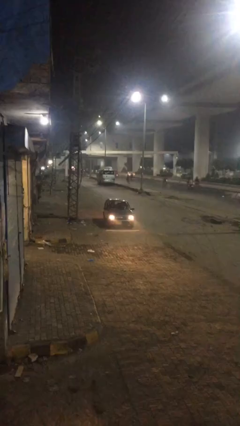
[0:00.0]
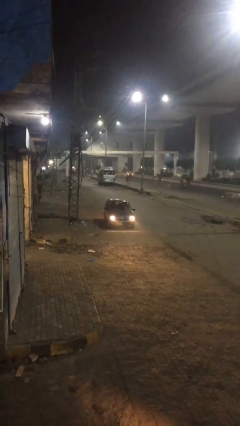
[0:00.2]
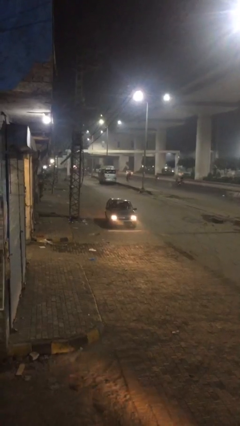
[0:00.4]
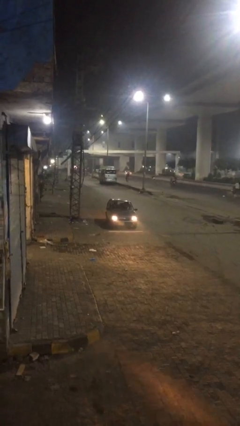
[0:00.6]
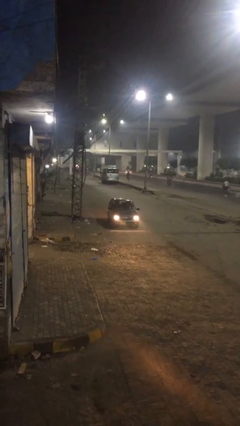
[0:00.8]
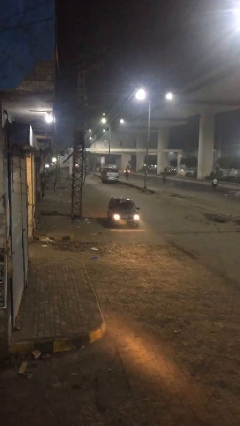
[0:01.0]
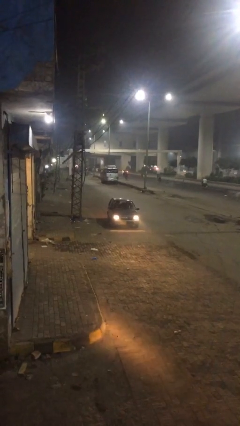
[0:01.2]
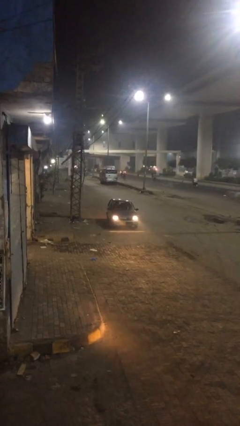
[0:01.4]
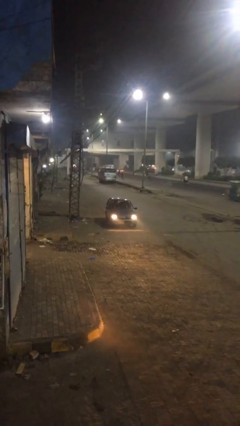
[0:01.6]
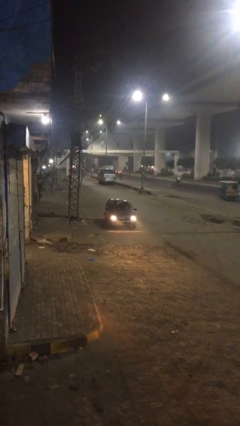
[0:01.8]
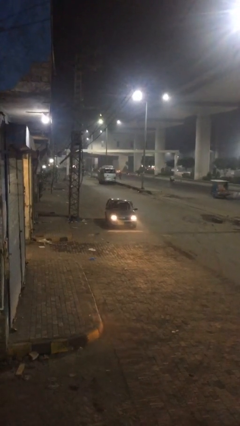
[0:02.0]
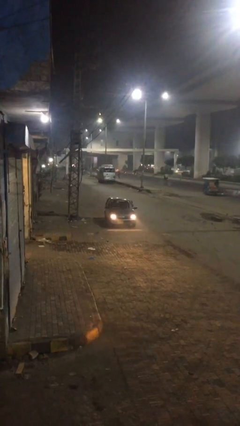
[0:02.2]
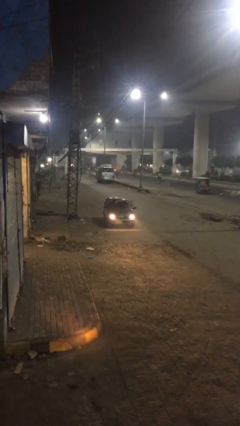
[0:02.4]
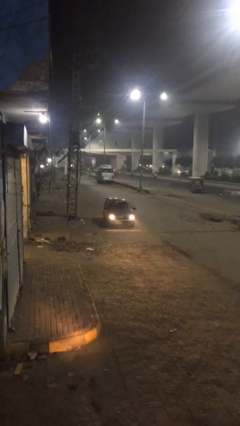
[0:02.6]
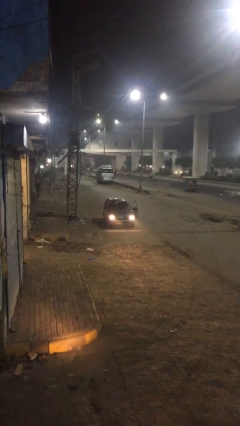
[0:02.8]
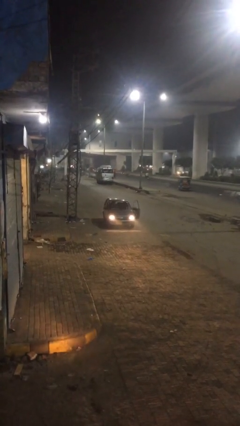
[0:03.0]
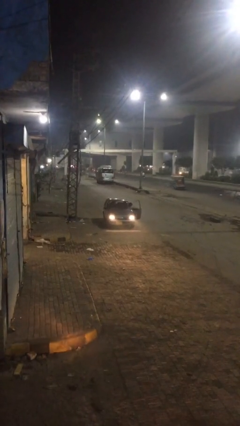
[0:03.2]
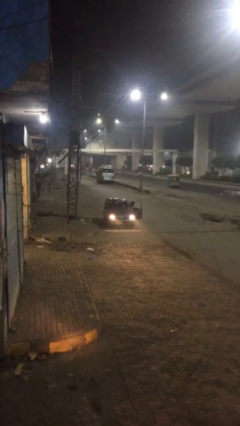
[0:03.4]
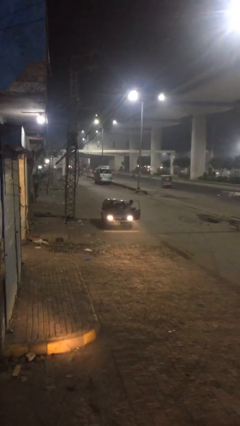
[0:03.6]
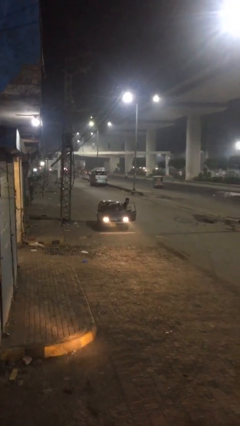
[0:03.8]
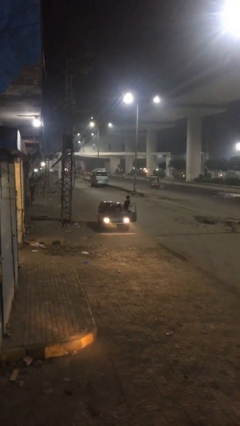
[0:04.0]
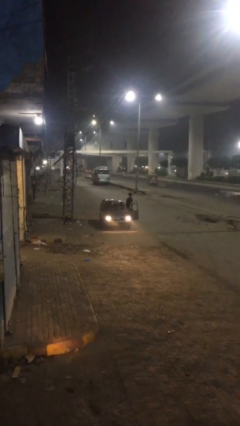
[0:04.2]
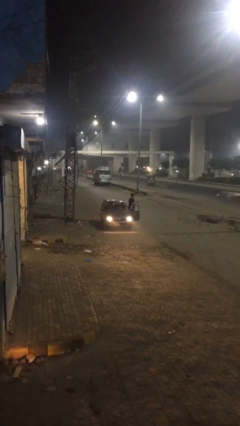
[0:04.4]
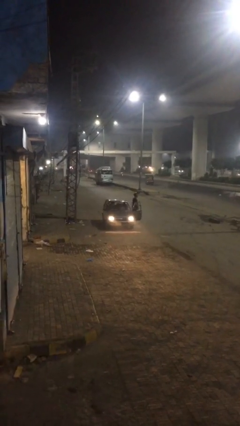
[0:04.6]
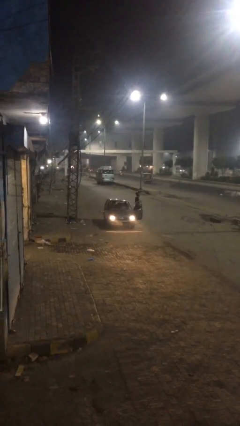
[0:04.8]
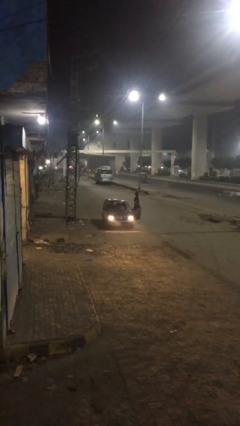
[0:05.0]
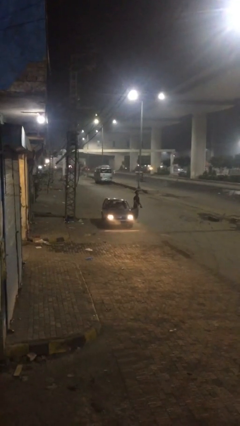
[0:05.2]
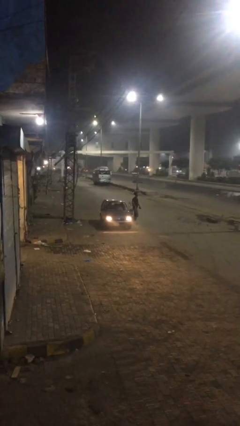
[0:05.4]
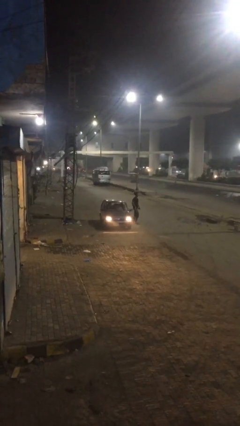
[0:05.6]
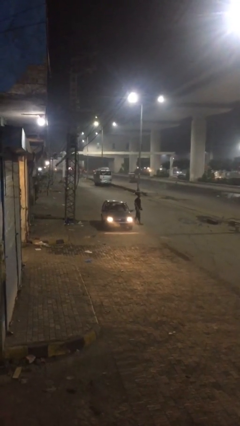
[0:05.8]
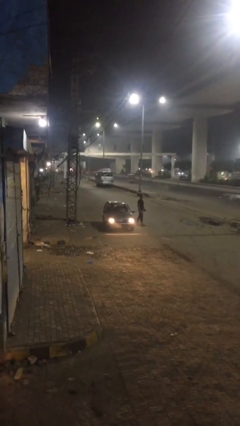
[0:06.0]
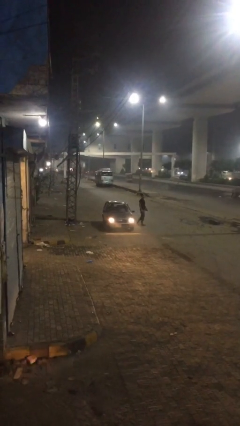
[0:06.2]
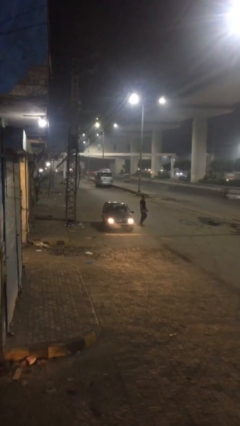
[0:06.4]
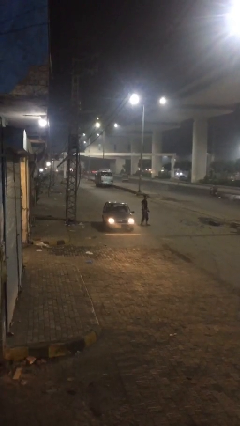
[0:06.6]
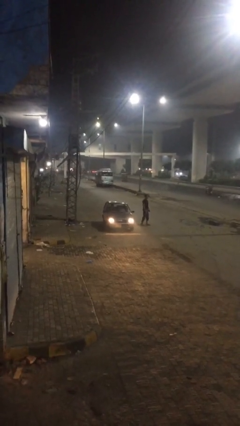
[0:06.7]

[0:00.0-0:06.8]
car drops off person

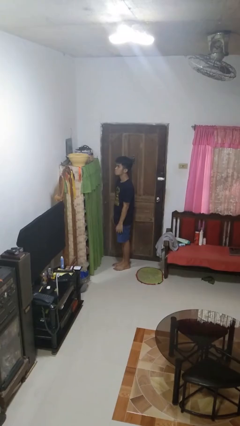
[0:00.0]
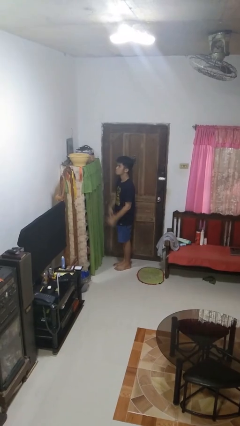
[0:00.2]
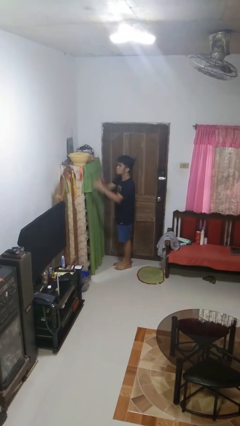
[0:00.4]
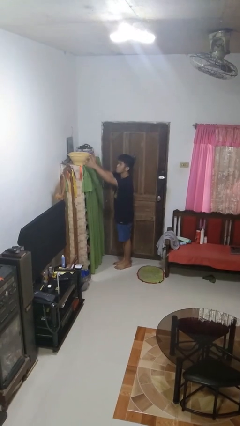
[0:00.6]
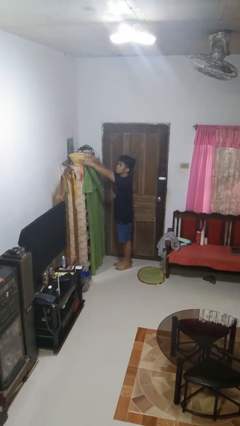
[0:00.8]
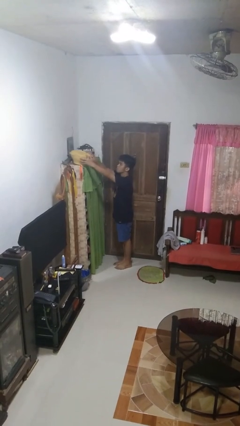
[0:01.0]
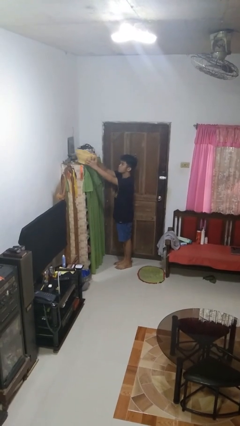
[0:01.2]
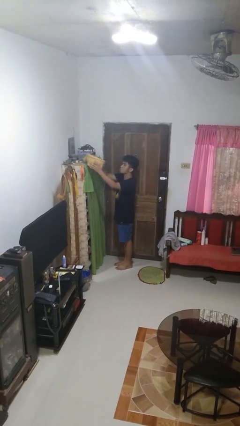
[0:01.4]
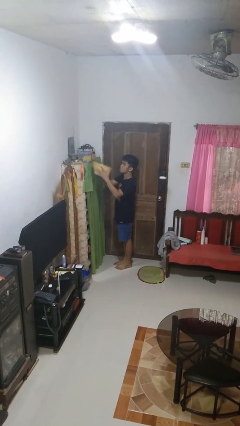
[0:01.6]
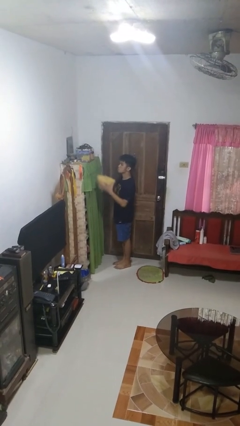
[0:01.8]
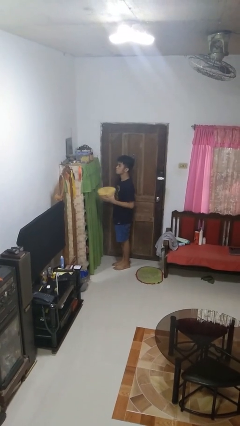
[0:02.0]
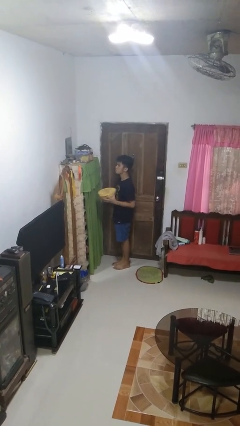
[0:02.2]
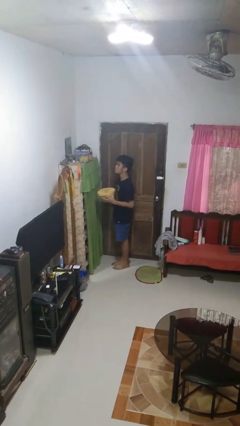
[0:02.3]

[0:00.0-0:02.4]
person picks up object from shelf

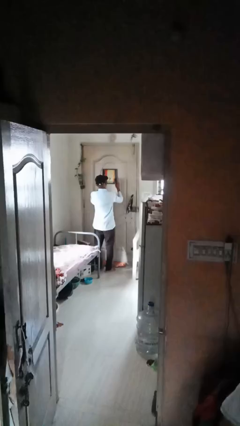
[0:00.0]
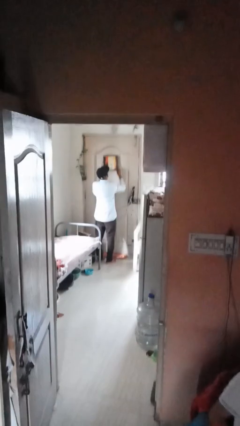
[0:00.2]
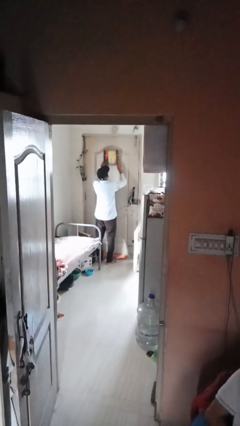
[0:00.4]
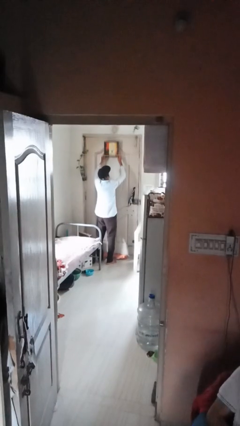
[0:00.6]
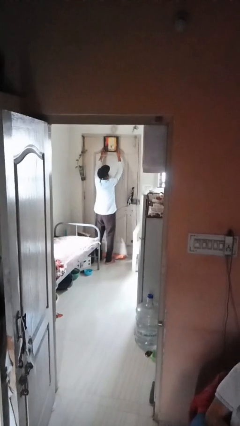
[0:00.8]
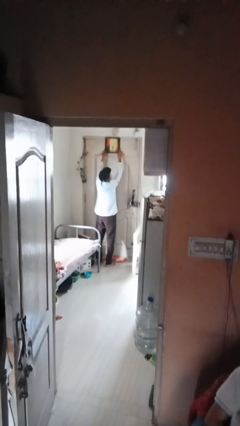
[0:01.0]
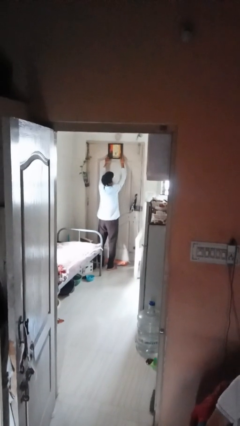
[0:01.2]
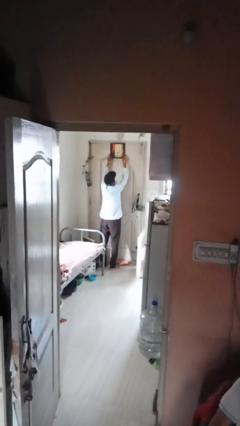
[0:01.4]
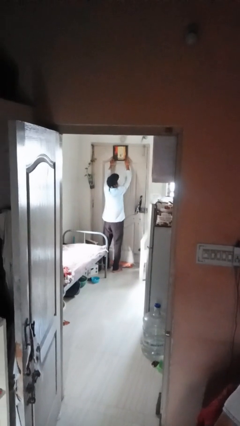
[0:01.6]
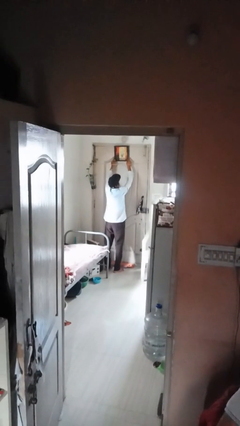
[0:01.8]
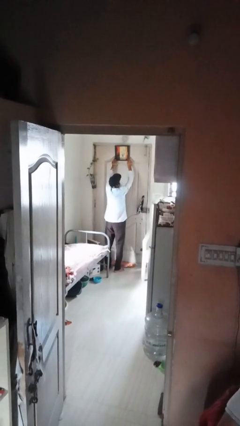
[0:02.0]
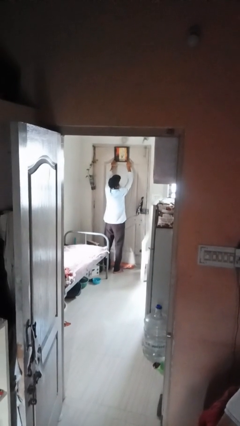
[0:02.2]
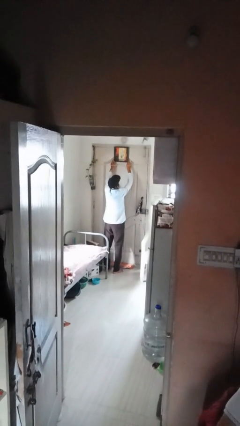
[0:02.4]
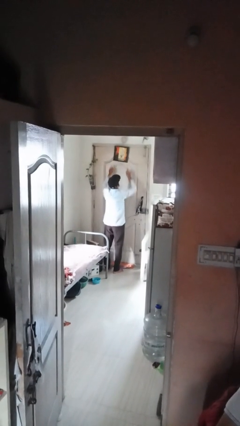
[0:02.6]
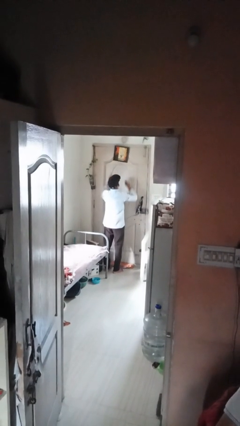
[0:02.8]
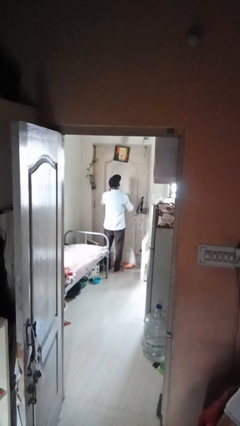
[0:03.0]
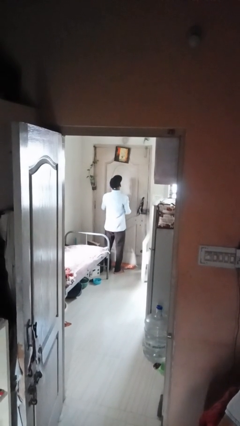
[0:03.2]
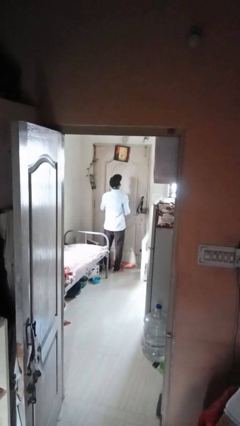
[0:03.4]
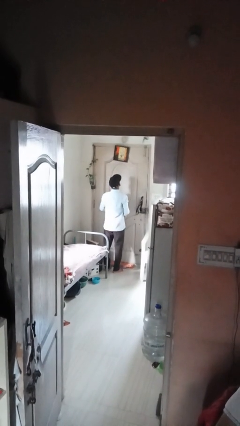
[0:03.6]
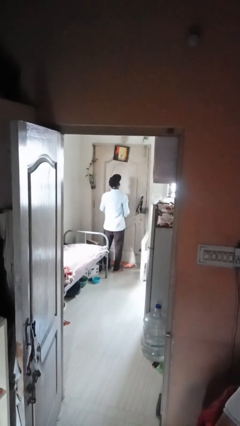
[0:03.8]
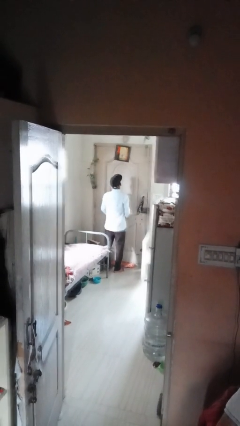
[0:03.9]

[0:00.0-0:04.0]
person puts up picture frame

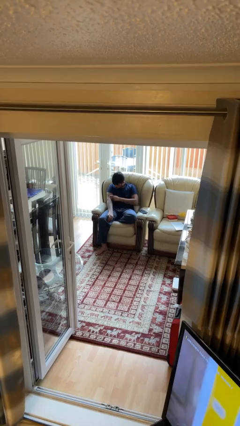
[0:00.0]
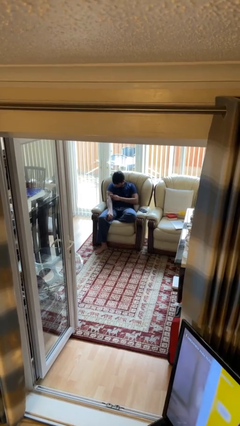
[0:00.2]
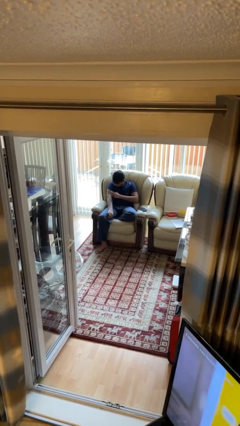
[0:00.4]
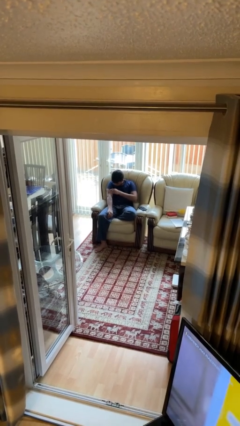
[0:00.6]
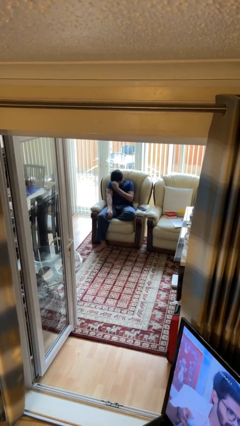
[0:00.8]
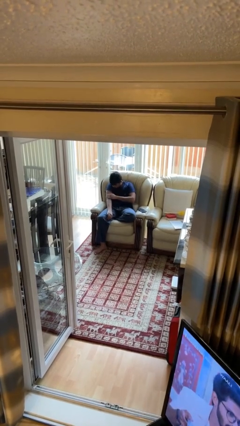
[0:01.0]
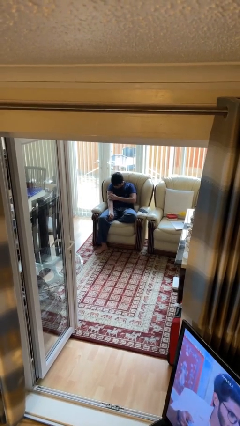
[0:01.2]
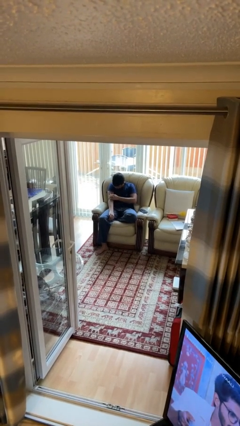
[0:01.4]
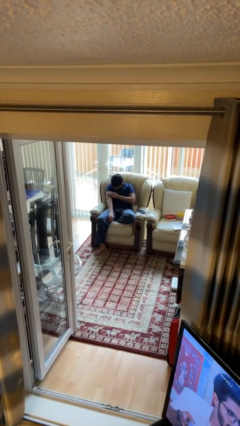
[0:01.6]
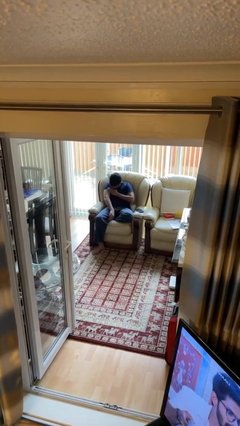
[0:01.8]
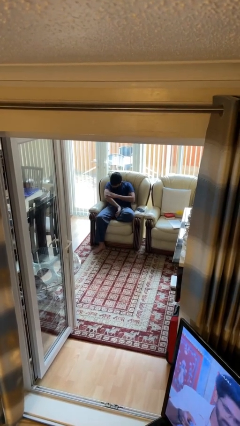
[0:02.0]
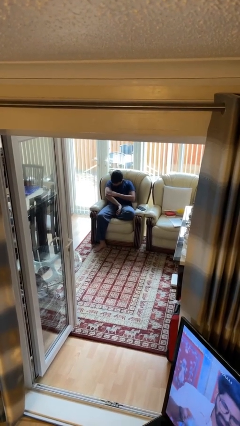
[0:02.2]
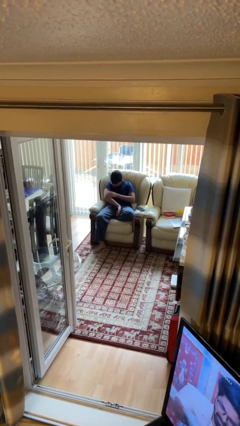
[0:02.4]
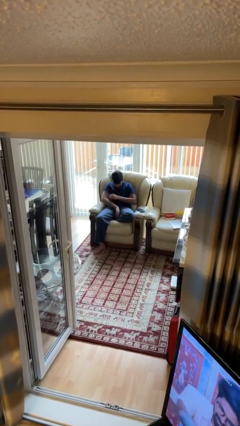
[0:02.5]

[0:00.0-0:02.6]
person swats bug

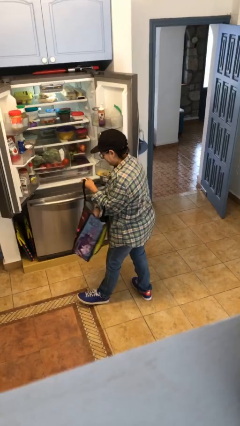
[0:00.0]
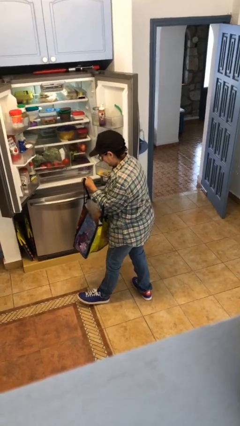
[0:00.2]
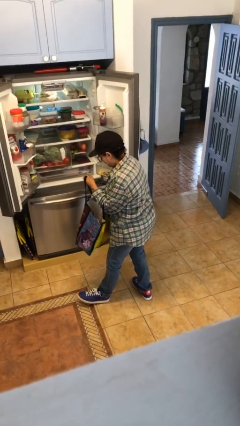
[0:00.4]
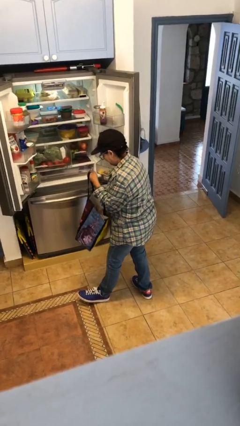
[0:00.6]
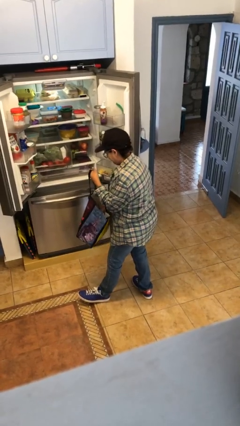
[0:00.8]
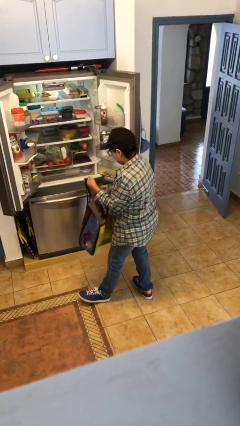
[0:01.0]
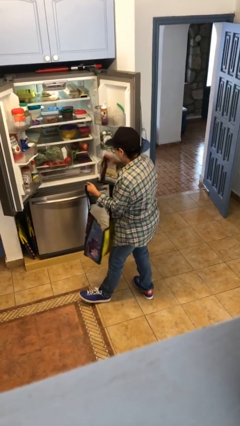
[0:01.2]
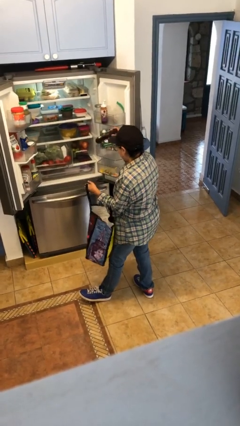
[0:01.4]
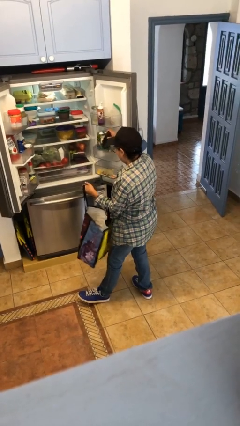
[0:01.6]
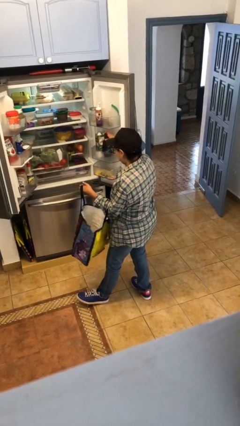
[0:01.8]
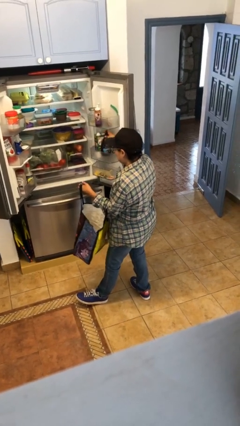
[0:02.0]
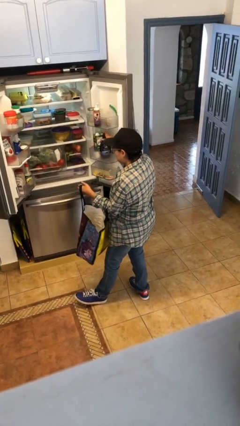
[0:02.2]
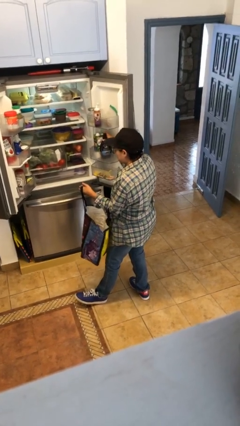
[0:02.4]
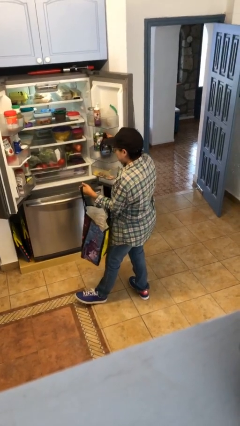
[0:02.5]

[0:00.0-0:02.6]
person loads groceries into refrigerator
